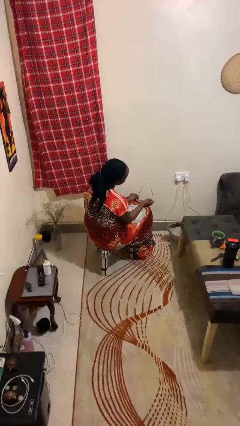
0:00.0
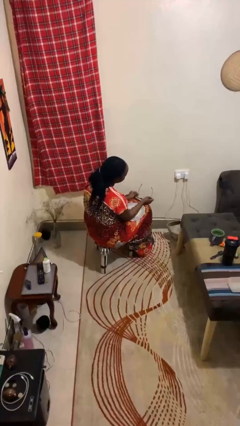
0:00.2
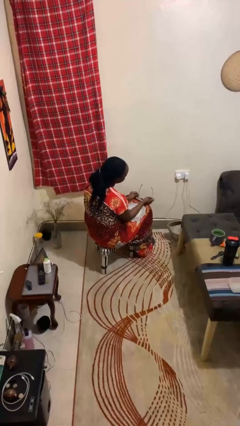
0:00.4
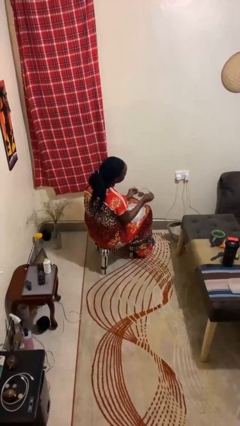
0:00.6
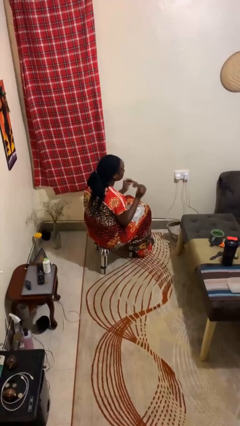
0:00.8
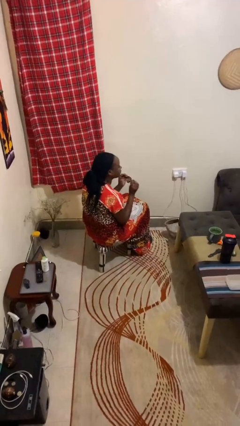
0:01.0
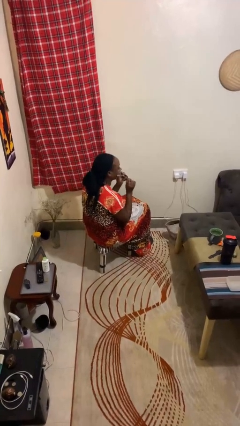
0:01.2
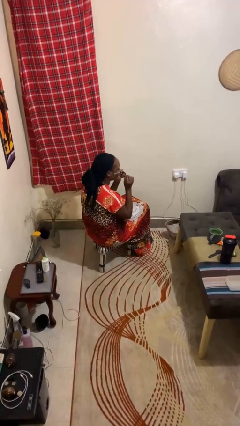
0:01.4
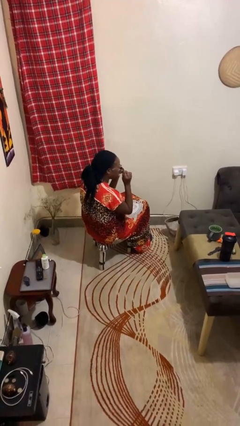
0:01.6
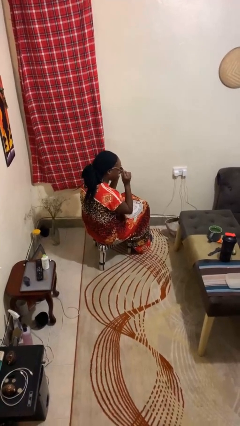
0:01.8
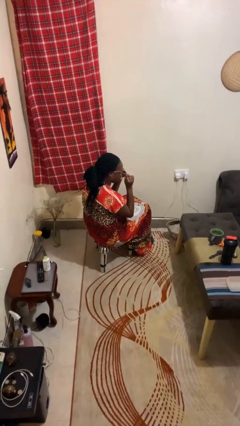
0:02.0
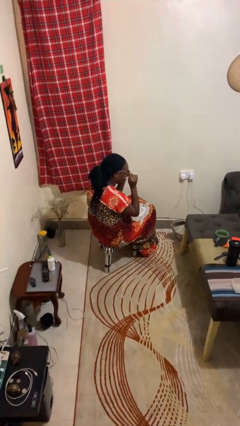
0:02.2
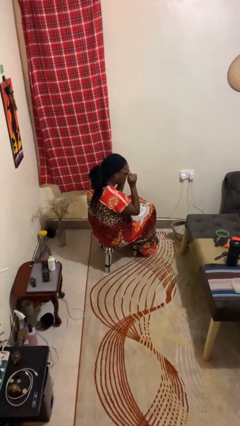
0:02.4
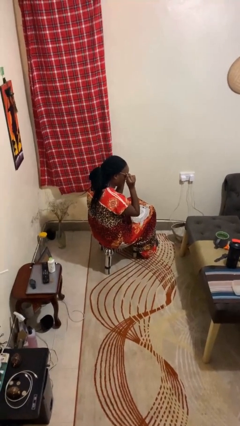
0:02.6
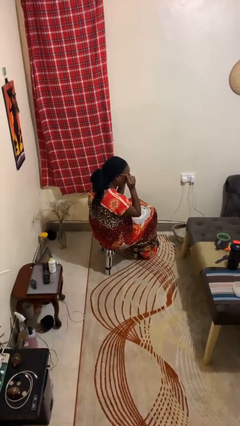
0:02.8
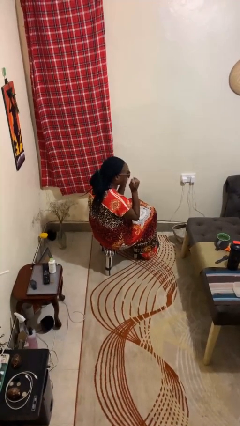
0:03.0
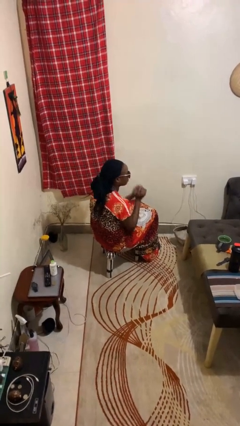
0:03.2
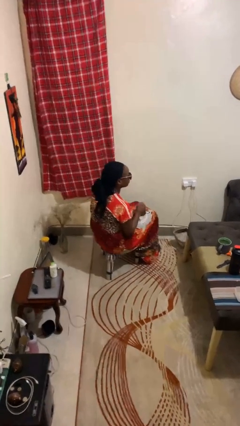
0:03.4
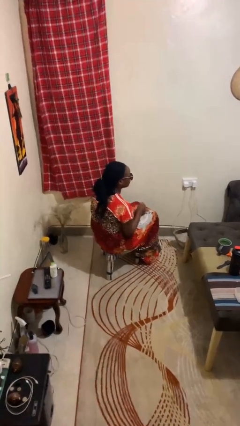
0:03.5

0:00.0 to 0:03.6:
person puts on sunglasses

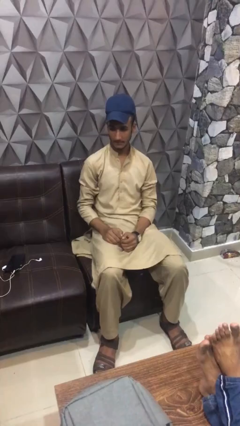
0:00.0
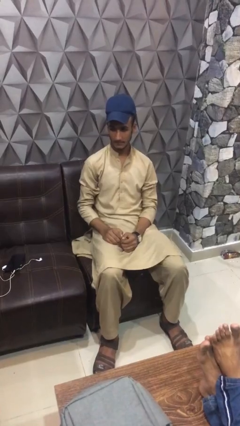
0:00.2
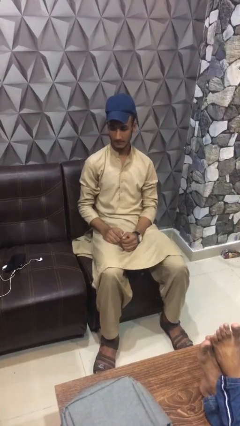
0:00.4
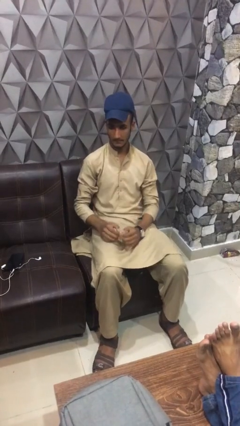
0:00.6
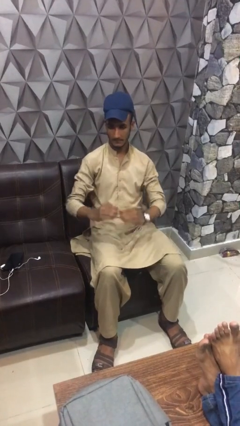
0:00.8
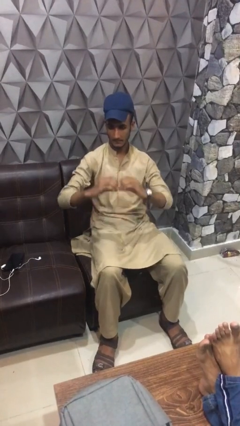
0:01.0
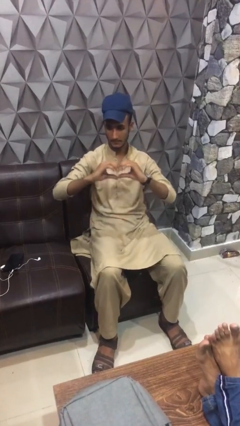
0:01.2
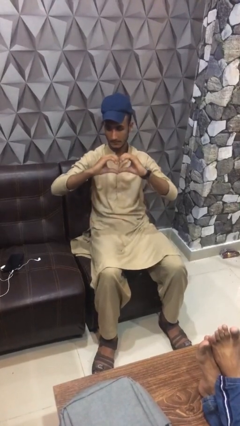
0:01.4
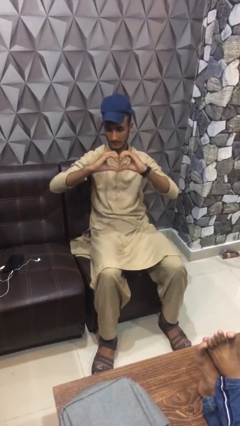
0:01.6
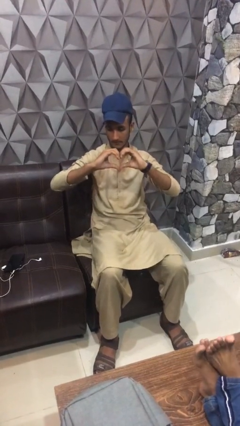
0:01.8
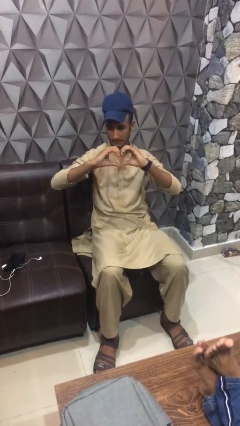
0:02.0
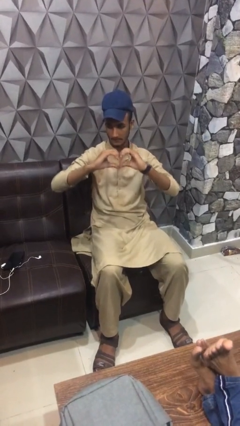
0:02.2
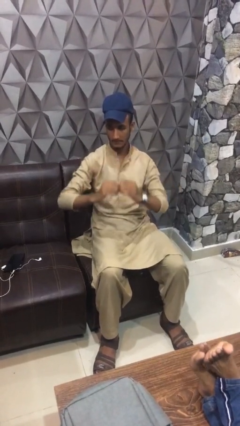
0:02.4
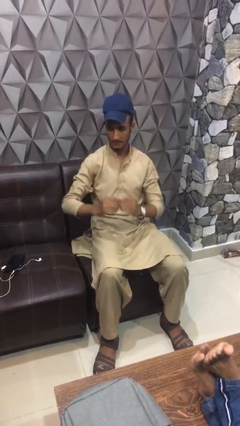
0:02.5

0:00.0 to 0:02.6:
person gestures heart

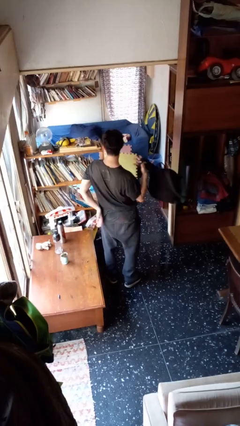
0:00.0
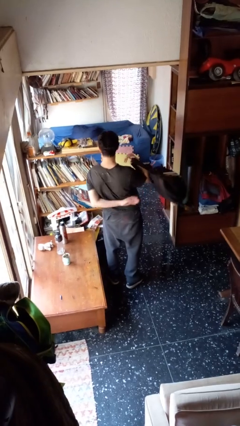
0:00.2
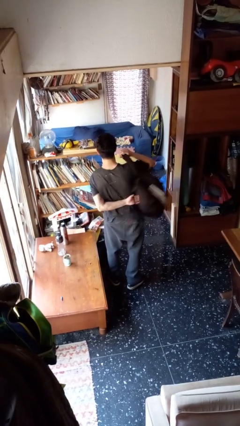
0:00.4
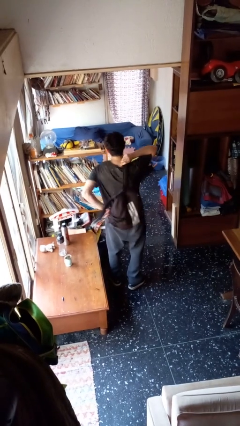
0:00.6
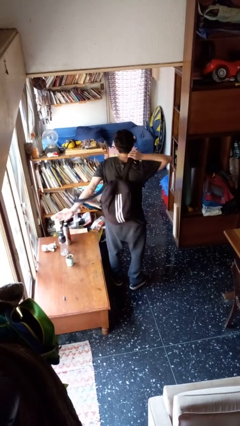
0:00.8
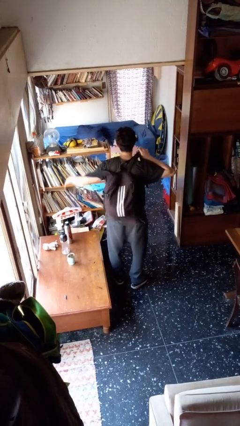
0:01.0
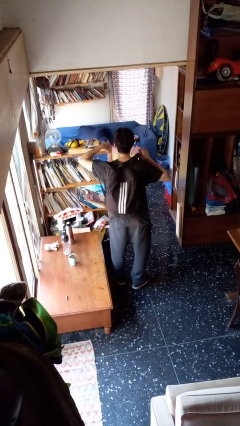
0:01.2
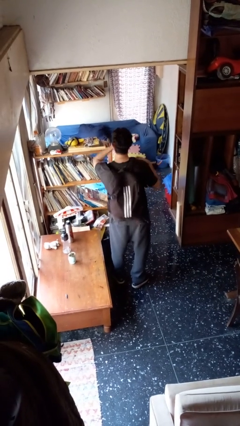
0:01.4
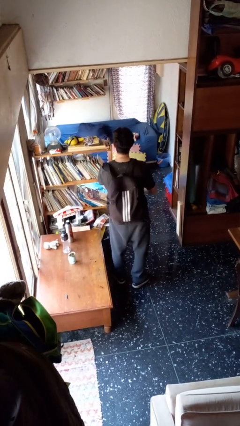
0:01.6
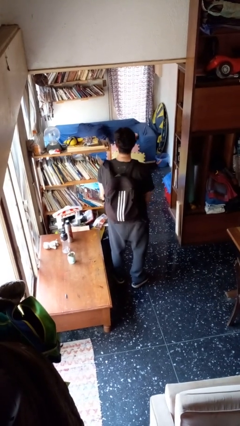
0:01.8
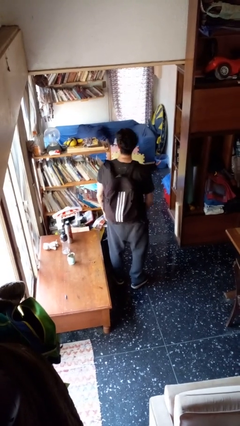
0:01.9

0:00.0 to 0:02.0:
person puts on backpack

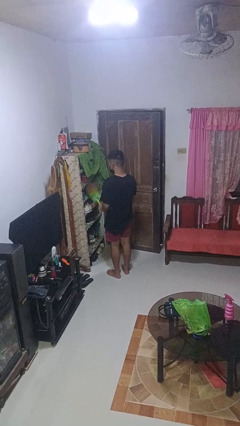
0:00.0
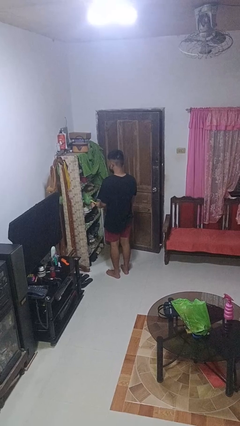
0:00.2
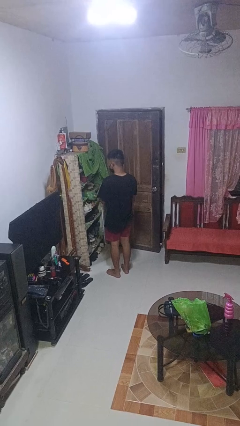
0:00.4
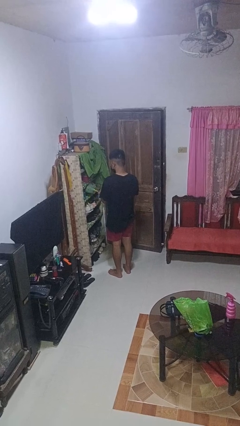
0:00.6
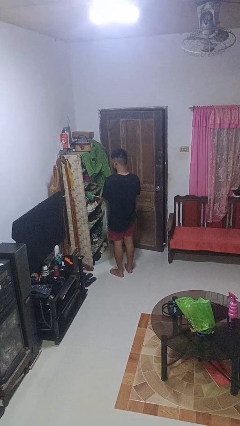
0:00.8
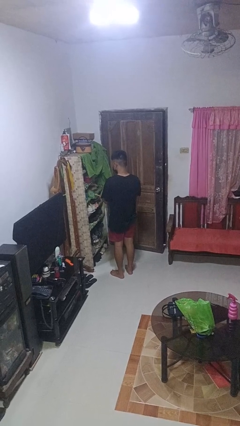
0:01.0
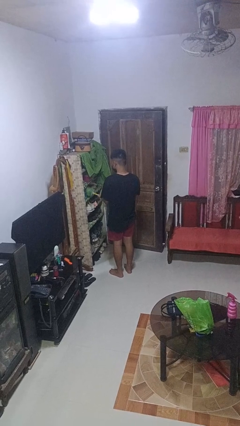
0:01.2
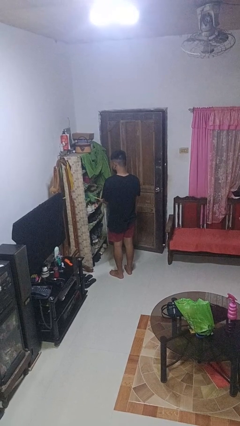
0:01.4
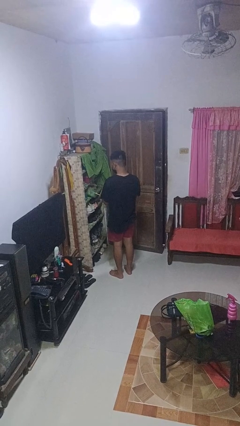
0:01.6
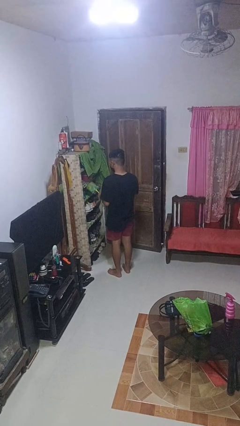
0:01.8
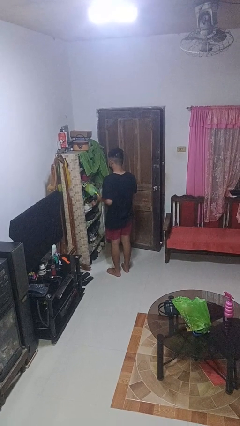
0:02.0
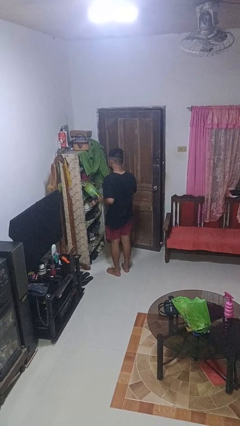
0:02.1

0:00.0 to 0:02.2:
person dusts furniture

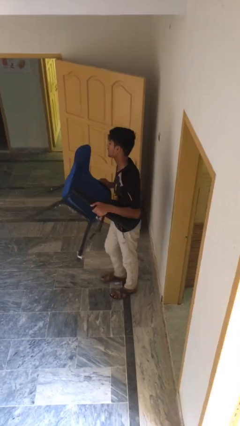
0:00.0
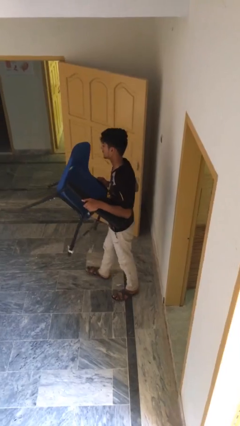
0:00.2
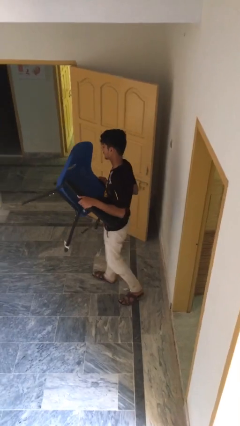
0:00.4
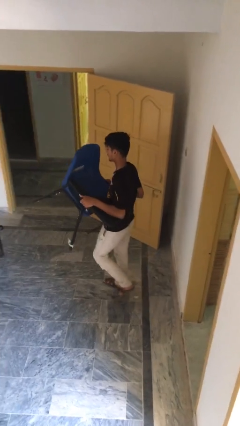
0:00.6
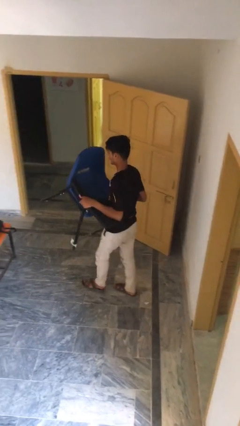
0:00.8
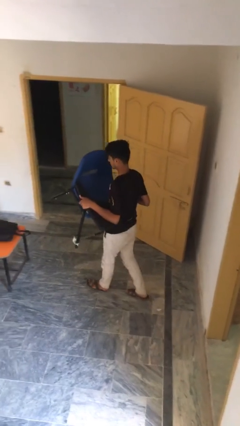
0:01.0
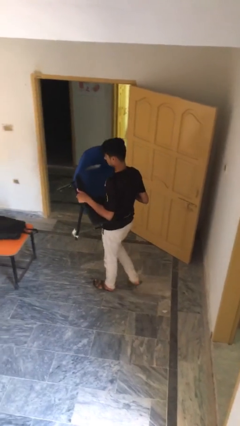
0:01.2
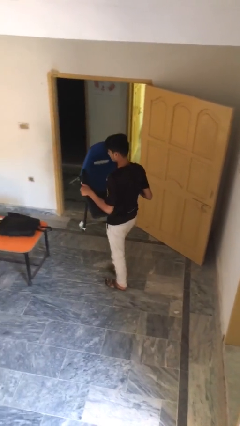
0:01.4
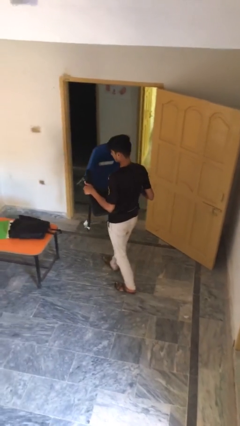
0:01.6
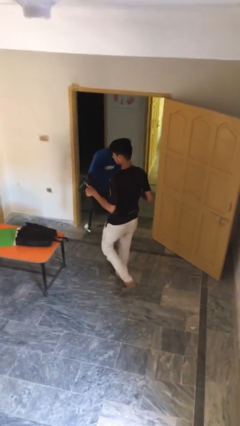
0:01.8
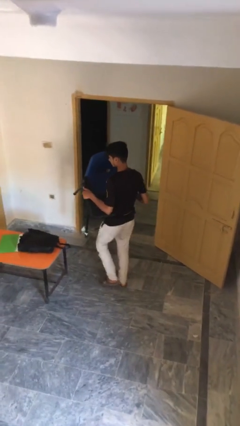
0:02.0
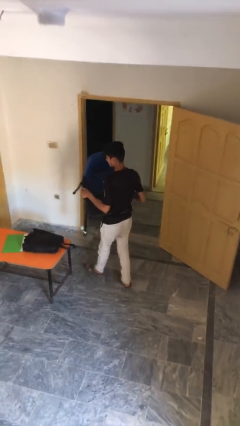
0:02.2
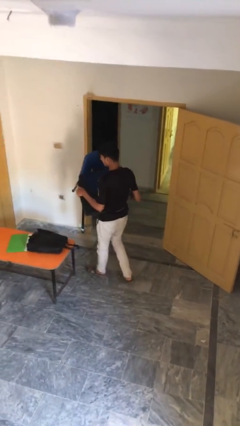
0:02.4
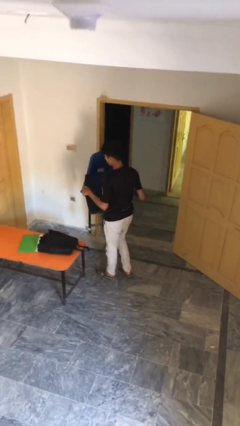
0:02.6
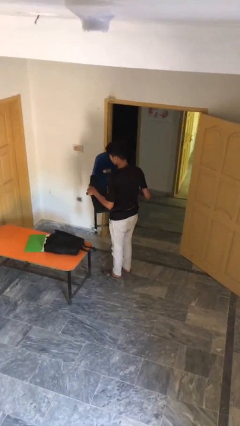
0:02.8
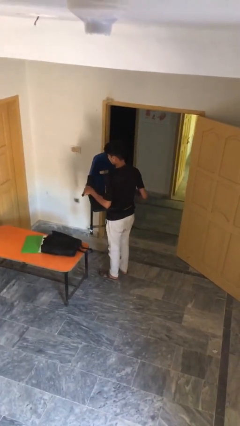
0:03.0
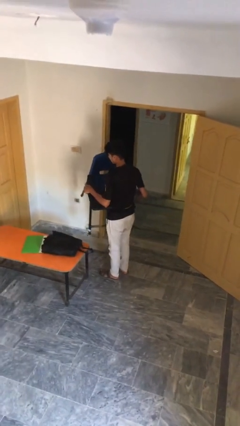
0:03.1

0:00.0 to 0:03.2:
person carries heavy object

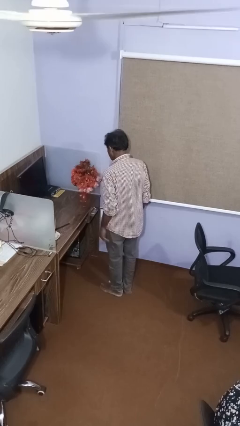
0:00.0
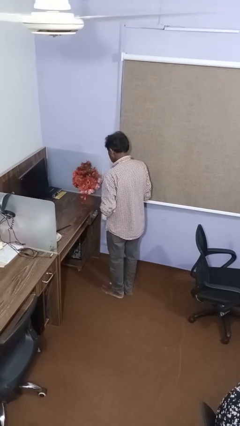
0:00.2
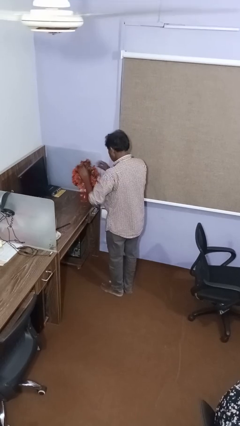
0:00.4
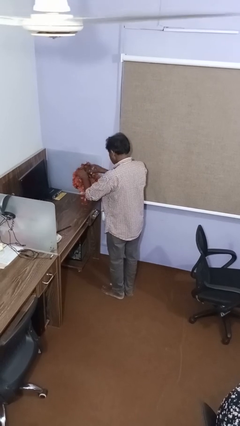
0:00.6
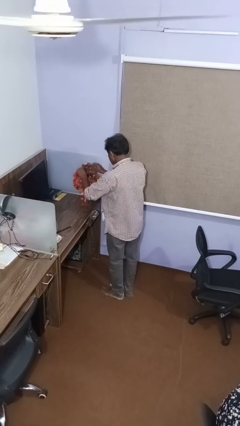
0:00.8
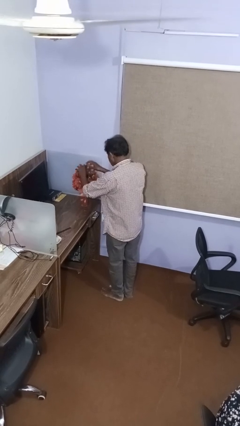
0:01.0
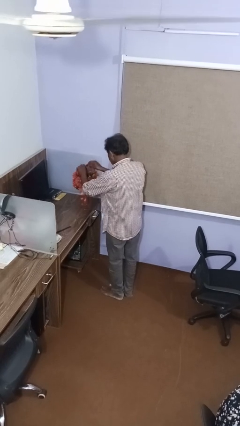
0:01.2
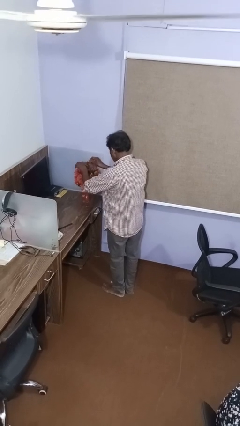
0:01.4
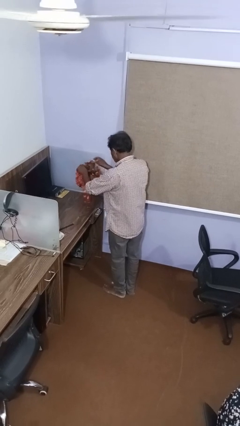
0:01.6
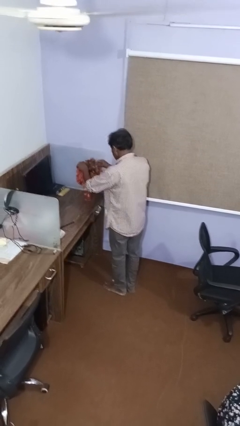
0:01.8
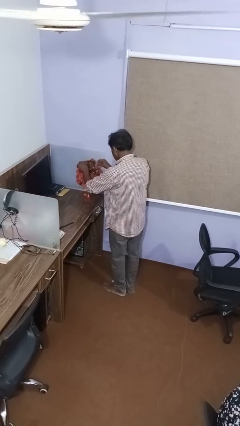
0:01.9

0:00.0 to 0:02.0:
person arranges flowers in vase

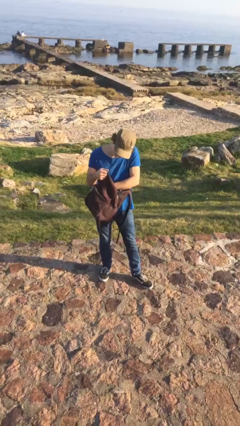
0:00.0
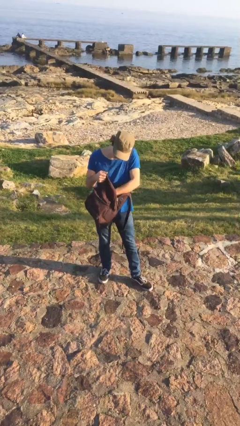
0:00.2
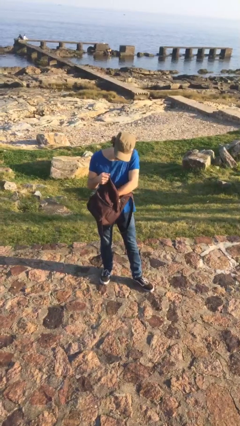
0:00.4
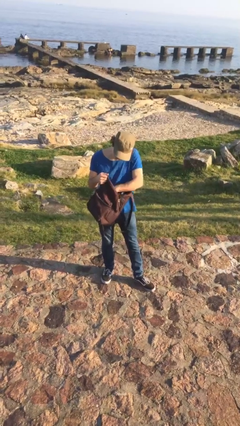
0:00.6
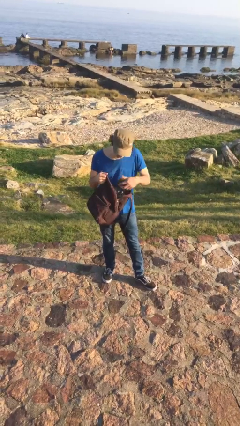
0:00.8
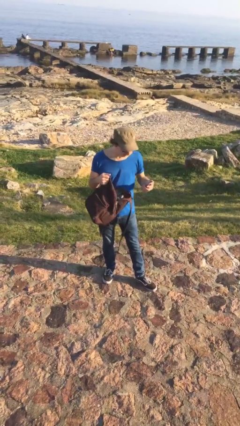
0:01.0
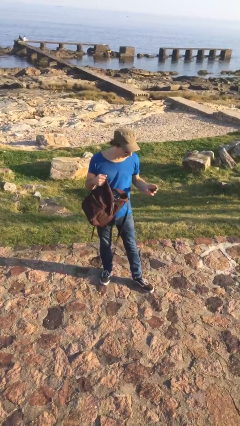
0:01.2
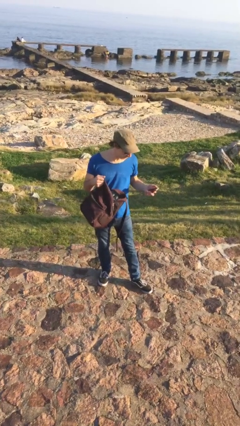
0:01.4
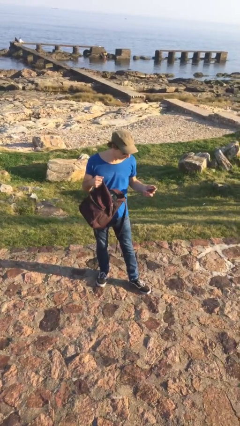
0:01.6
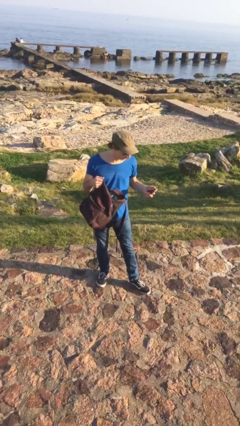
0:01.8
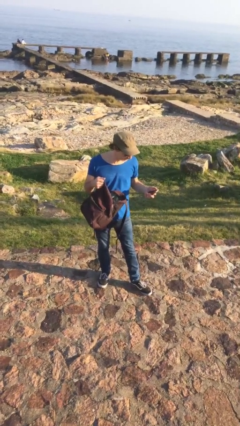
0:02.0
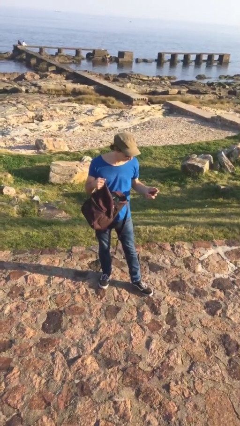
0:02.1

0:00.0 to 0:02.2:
person takes object from backpack
